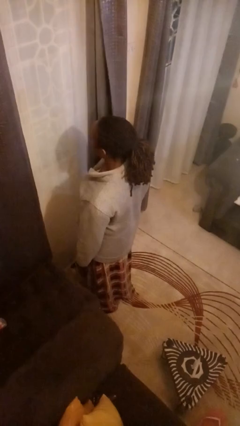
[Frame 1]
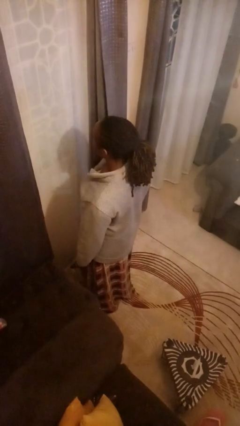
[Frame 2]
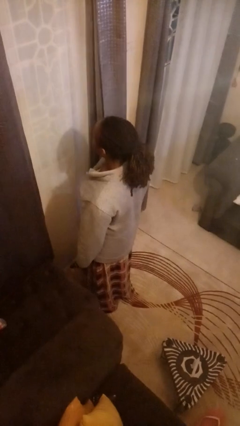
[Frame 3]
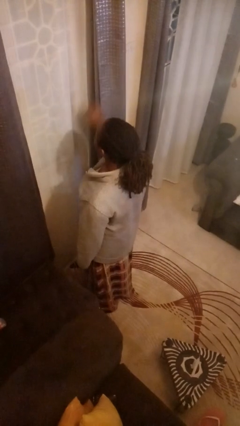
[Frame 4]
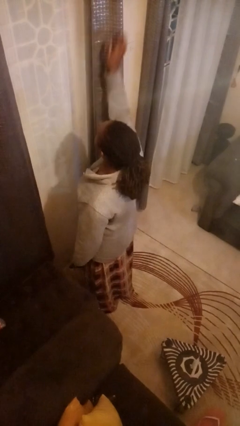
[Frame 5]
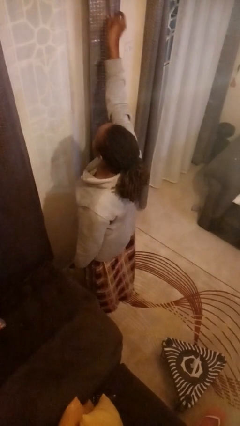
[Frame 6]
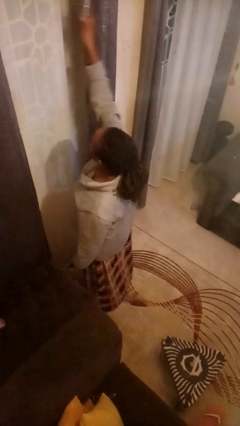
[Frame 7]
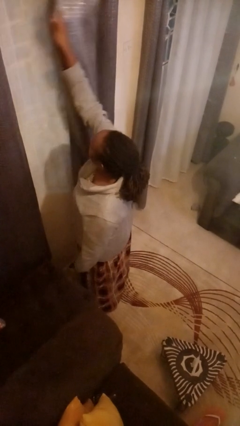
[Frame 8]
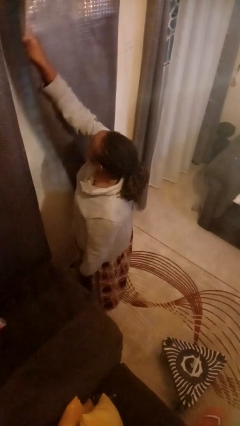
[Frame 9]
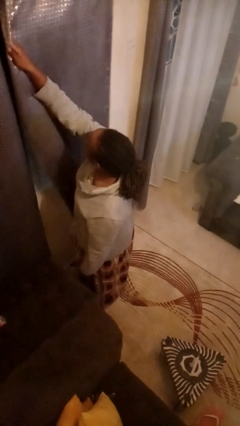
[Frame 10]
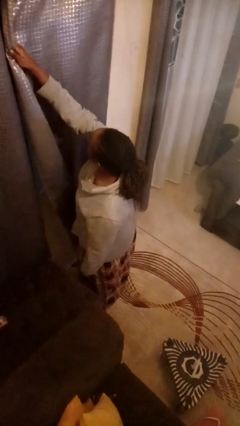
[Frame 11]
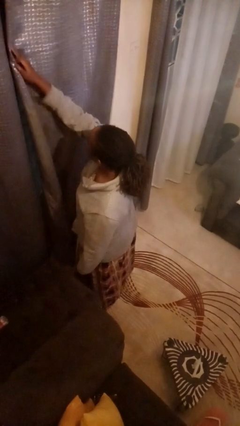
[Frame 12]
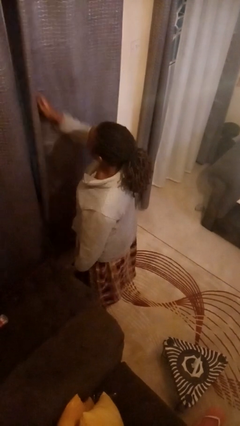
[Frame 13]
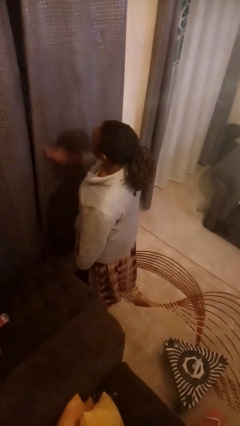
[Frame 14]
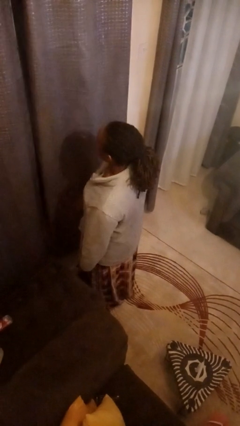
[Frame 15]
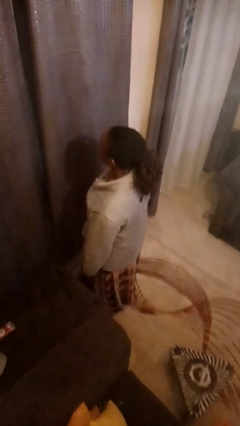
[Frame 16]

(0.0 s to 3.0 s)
person closes curtains

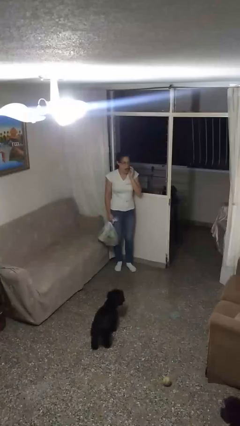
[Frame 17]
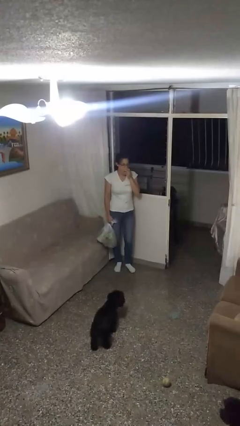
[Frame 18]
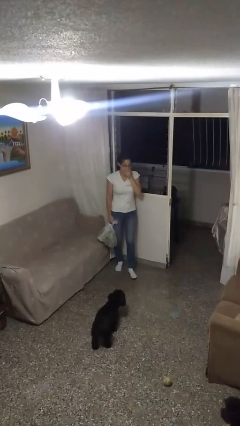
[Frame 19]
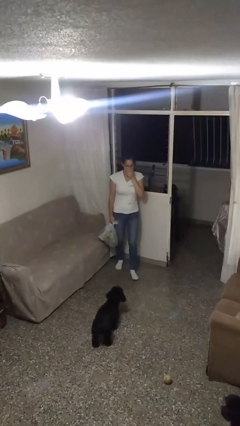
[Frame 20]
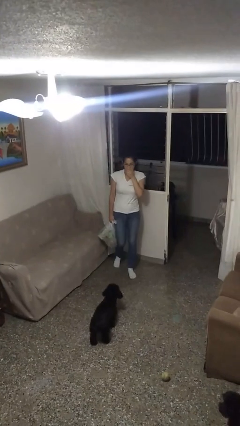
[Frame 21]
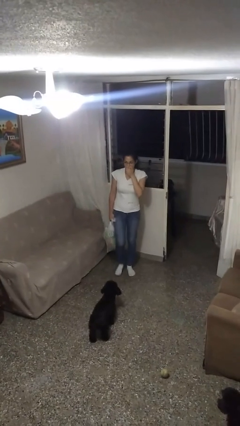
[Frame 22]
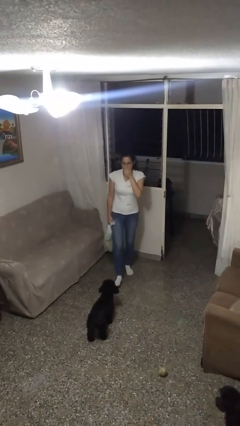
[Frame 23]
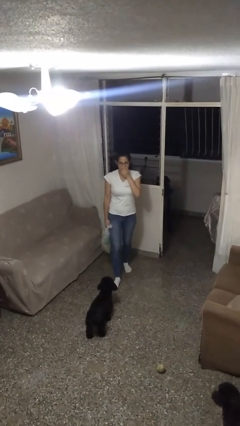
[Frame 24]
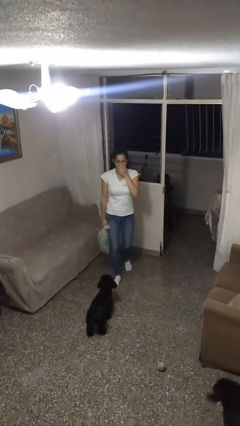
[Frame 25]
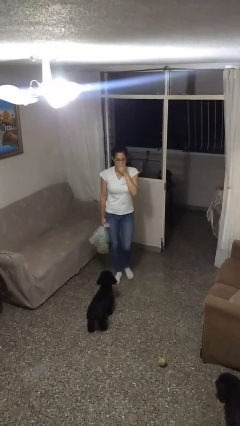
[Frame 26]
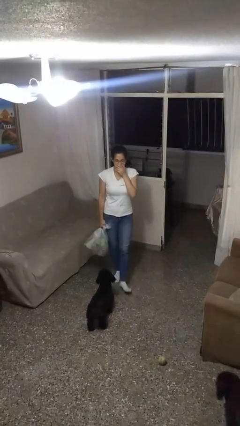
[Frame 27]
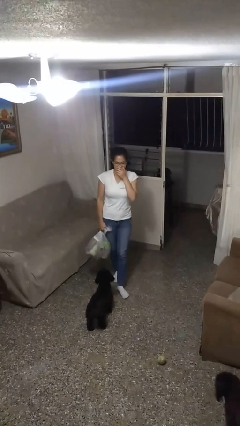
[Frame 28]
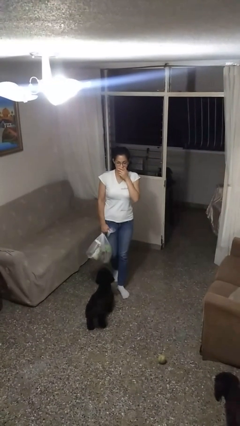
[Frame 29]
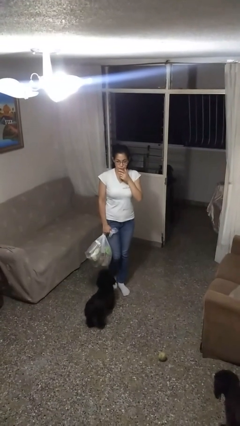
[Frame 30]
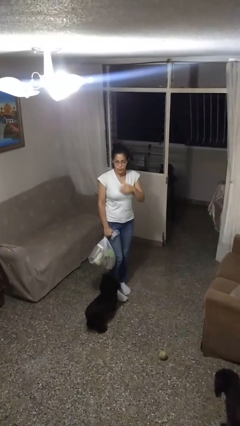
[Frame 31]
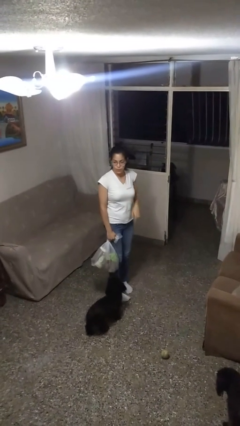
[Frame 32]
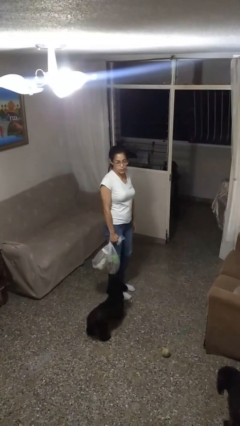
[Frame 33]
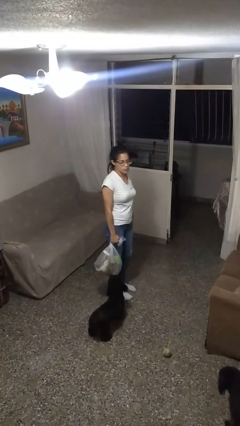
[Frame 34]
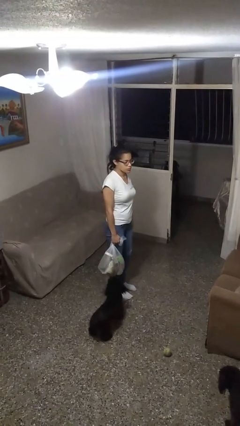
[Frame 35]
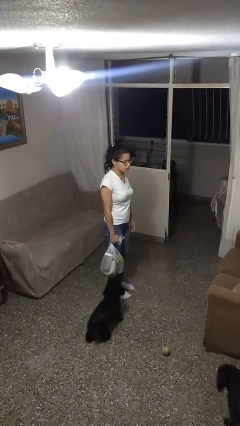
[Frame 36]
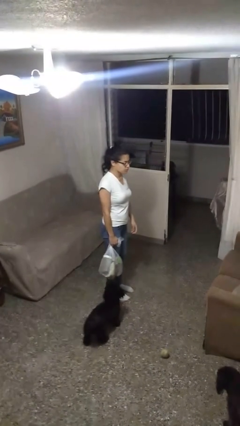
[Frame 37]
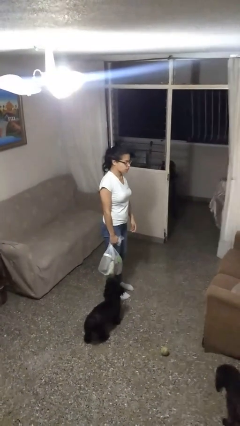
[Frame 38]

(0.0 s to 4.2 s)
person carries groceries

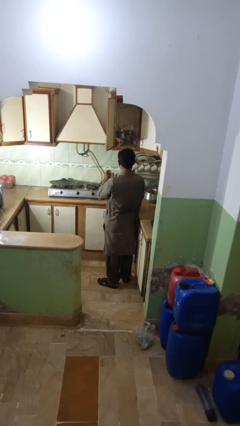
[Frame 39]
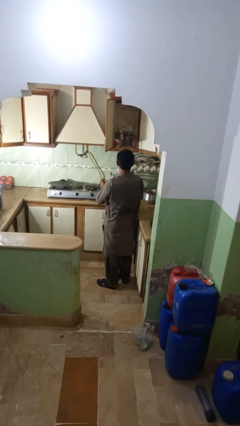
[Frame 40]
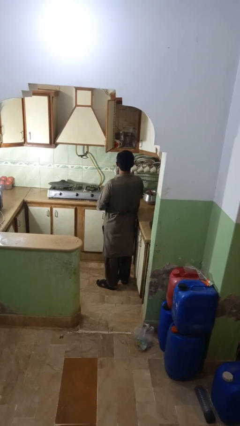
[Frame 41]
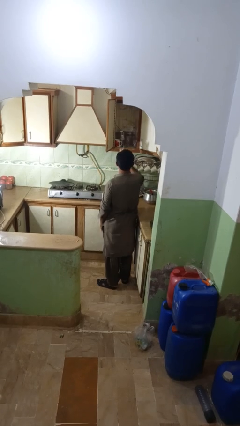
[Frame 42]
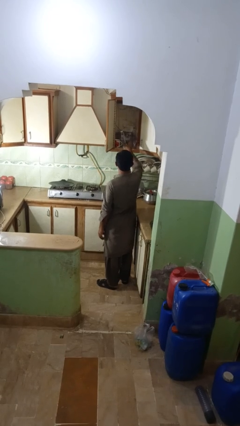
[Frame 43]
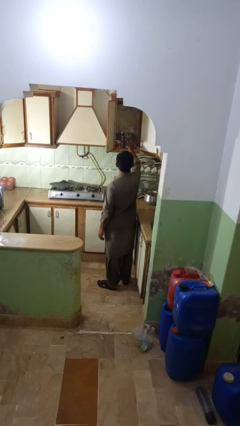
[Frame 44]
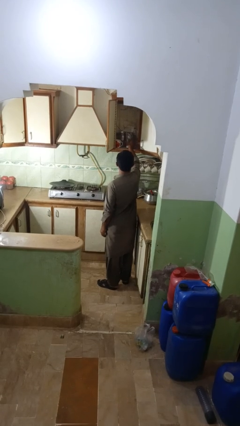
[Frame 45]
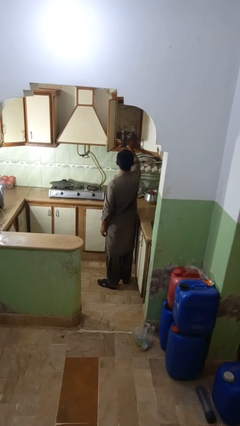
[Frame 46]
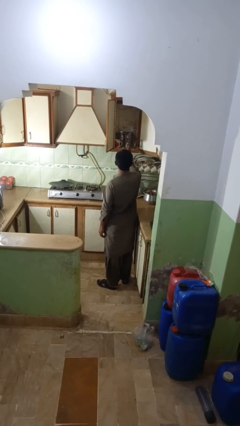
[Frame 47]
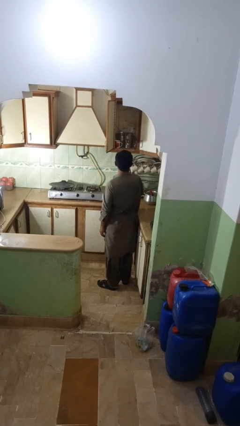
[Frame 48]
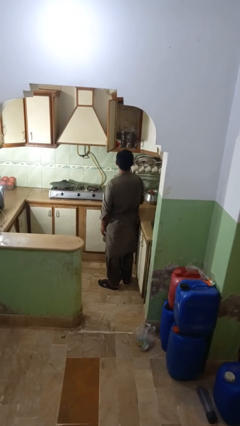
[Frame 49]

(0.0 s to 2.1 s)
person puts object into kitchen drawer

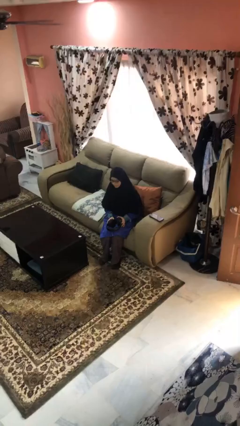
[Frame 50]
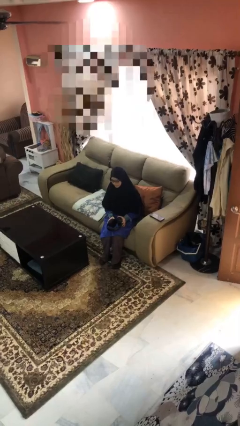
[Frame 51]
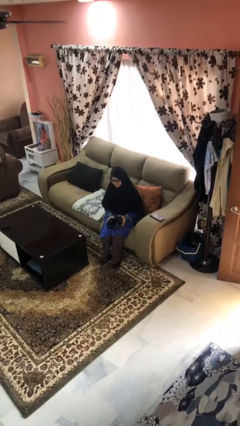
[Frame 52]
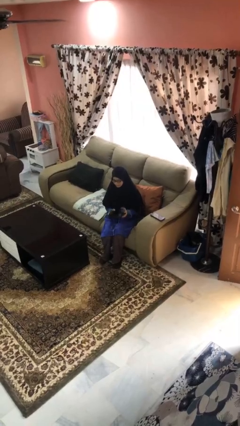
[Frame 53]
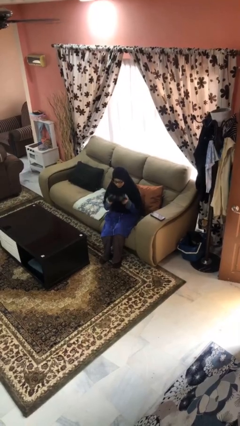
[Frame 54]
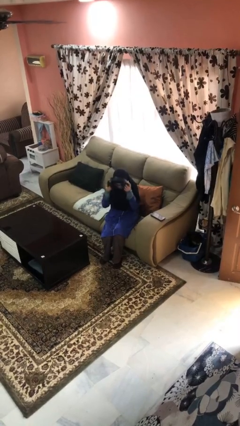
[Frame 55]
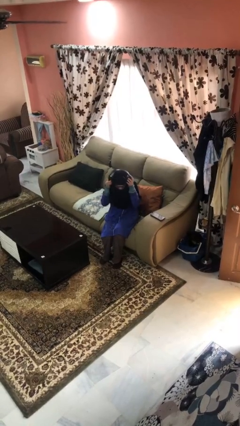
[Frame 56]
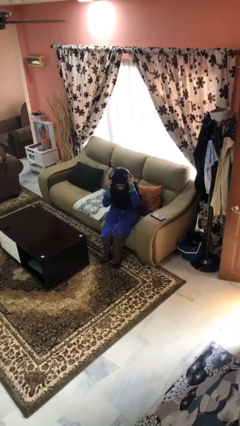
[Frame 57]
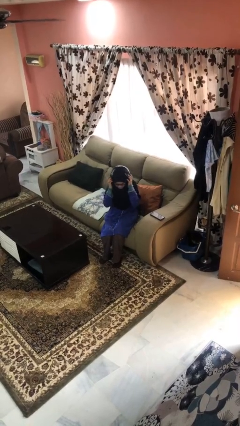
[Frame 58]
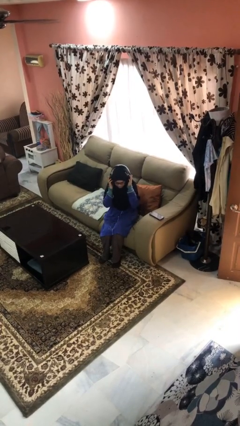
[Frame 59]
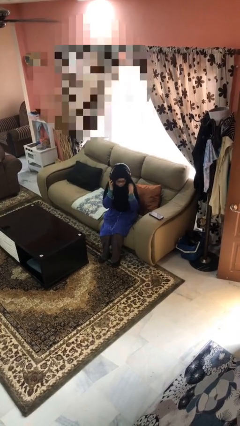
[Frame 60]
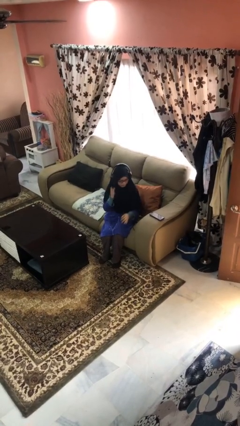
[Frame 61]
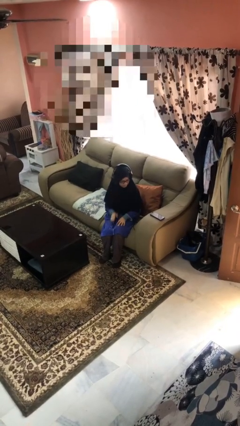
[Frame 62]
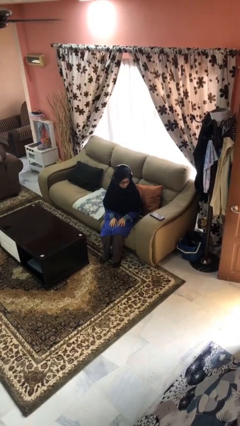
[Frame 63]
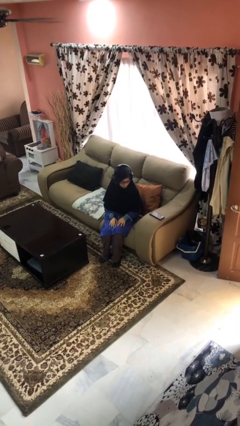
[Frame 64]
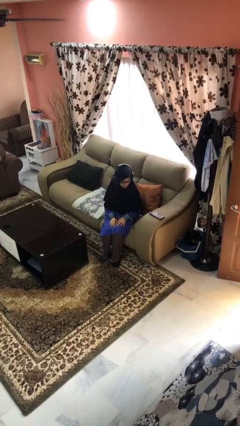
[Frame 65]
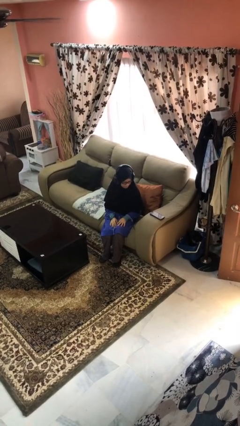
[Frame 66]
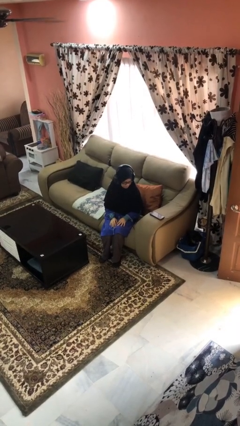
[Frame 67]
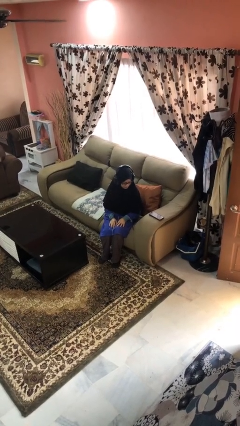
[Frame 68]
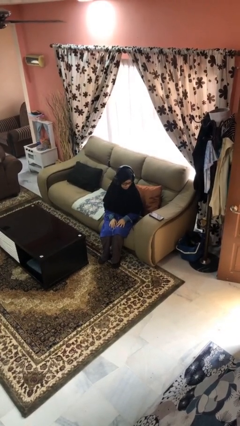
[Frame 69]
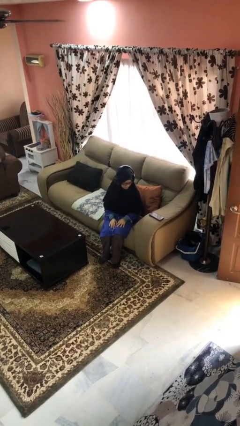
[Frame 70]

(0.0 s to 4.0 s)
person puts on headphones

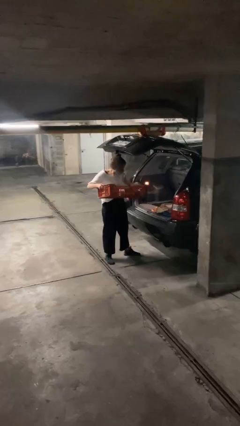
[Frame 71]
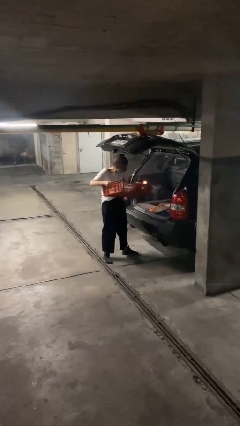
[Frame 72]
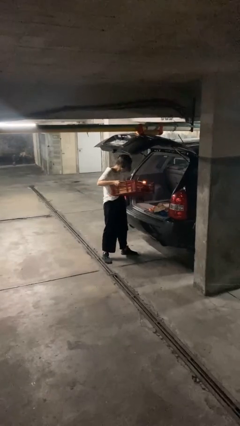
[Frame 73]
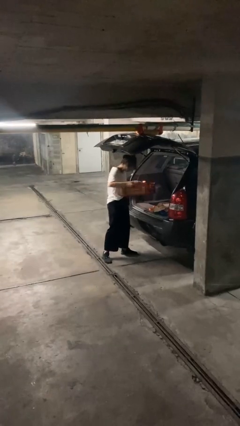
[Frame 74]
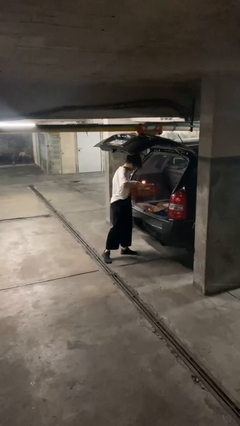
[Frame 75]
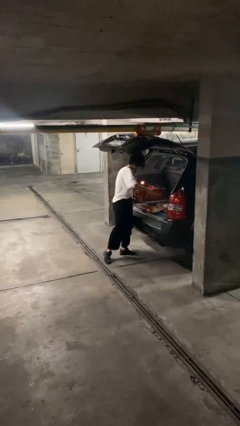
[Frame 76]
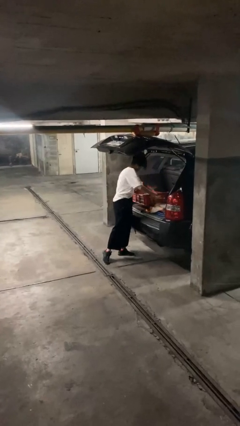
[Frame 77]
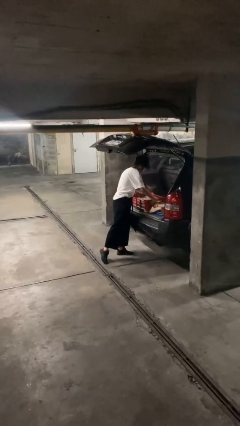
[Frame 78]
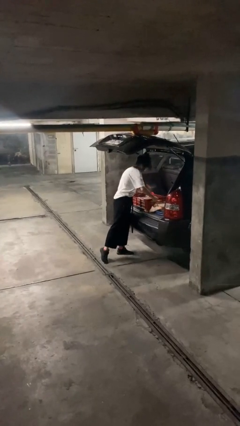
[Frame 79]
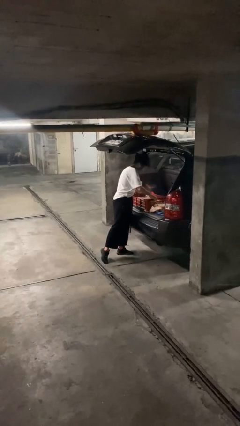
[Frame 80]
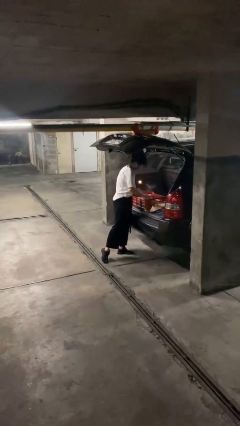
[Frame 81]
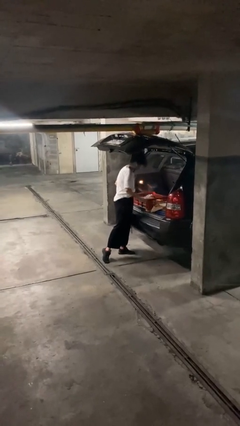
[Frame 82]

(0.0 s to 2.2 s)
person loads car

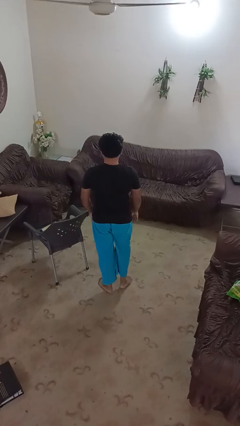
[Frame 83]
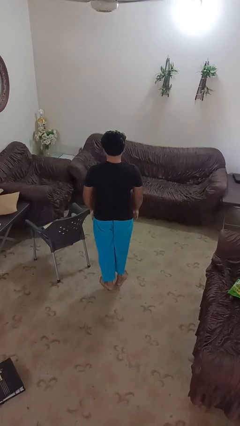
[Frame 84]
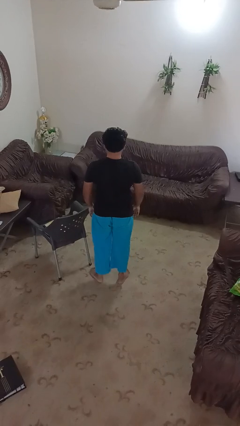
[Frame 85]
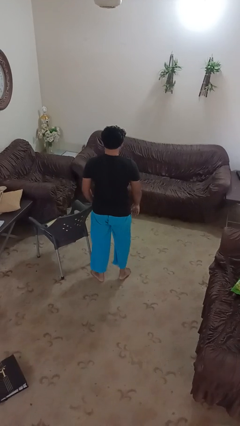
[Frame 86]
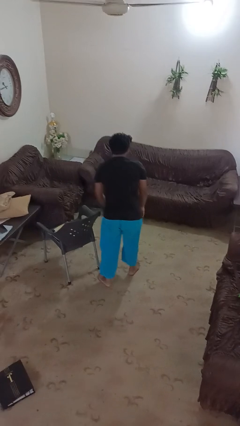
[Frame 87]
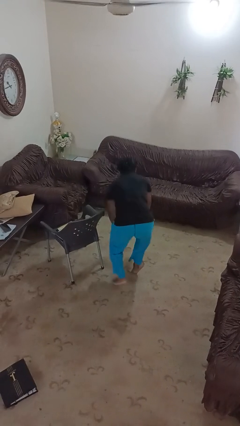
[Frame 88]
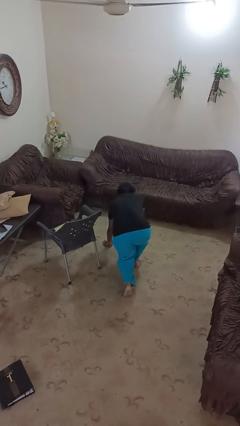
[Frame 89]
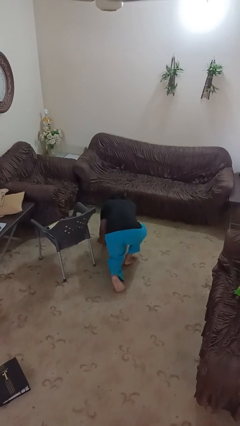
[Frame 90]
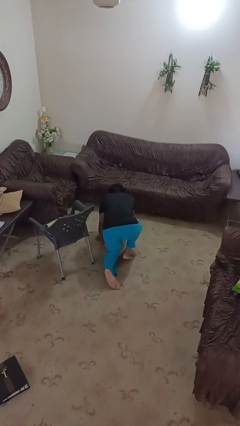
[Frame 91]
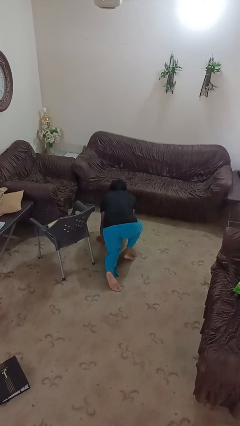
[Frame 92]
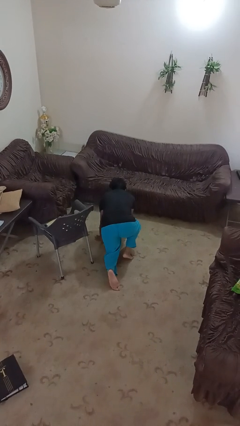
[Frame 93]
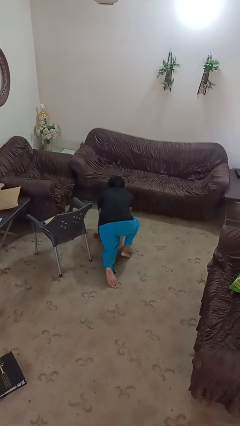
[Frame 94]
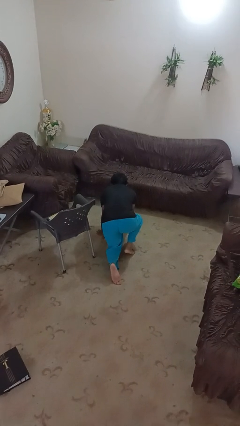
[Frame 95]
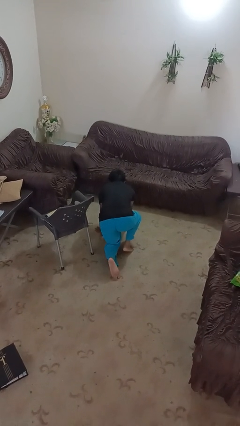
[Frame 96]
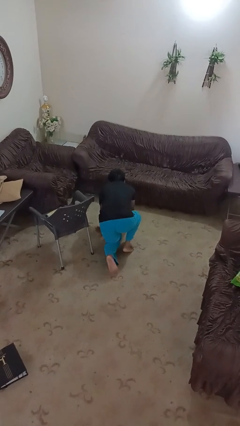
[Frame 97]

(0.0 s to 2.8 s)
person trips on object on floor
